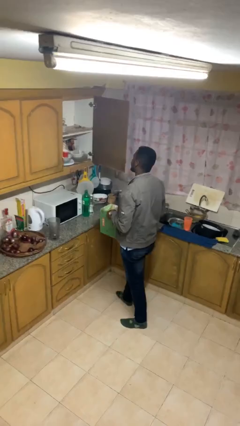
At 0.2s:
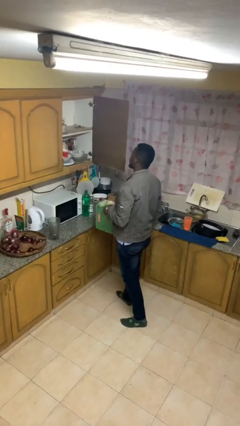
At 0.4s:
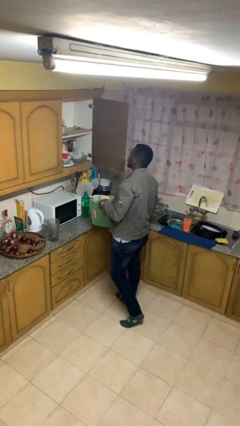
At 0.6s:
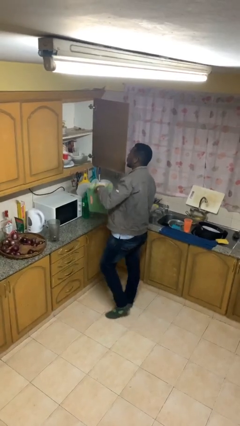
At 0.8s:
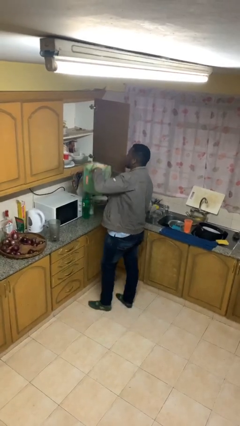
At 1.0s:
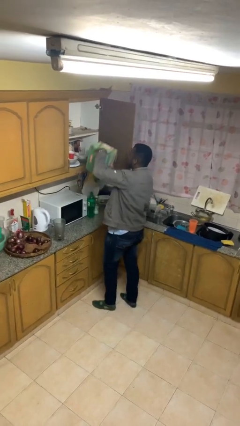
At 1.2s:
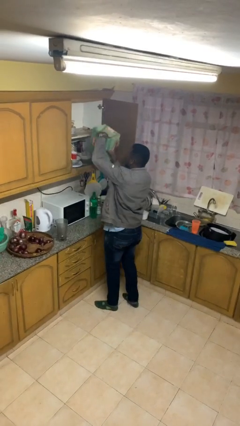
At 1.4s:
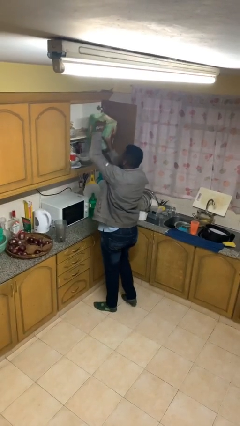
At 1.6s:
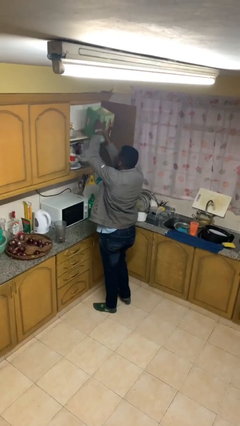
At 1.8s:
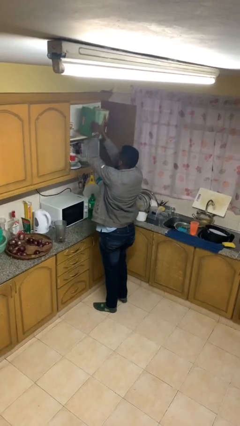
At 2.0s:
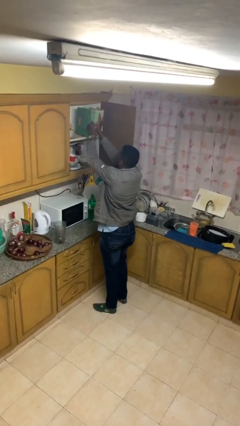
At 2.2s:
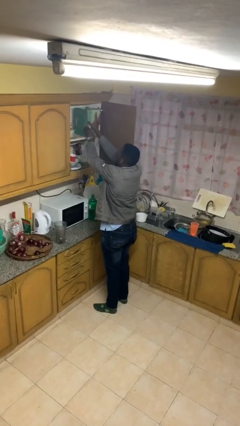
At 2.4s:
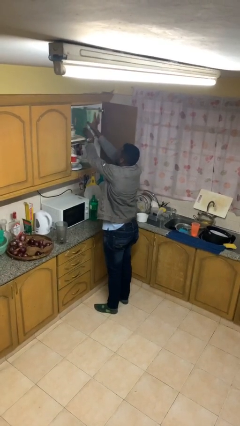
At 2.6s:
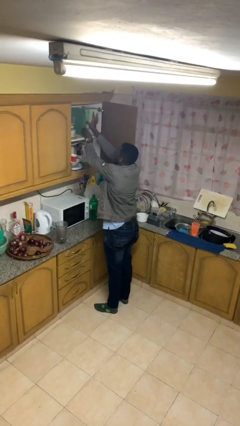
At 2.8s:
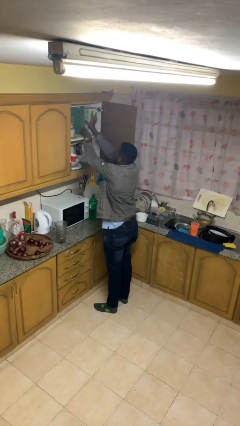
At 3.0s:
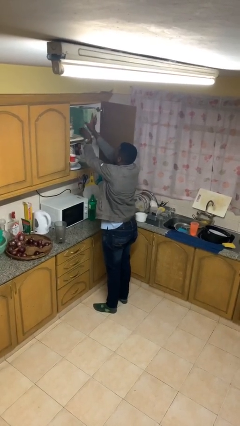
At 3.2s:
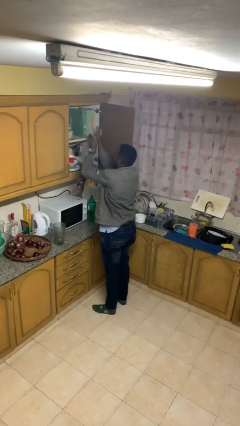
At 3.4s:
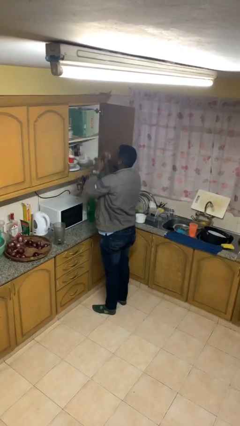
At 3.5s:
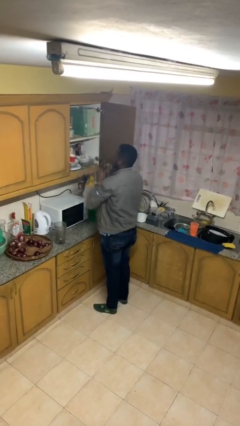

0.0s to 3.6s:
person puts down object on shelf

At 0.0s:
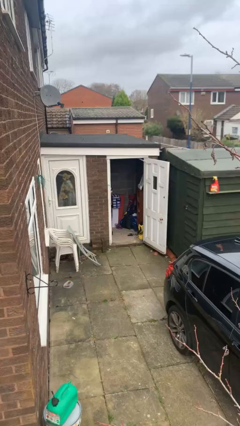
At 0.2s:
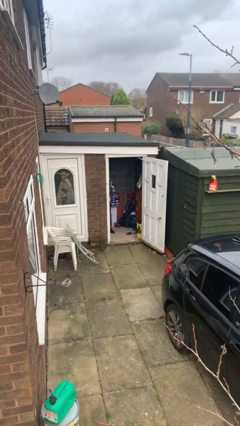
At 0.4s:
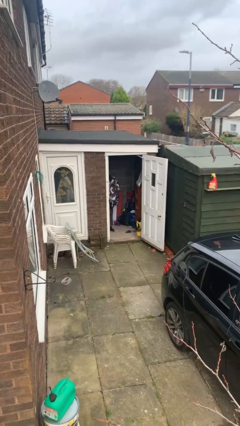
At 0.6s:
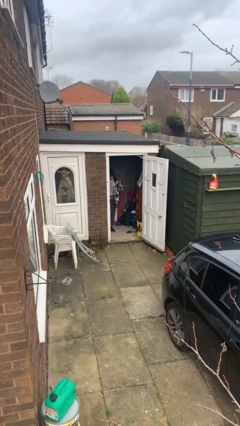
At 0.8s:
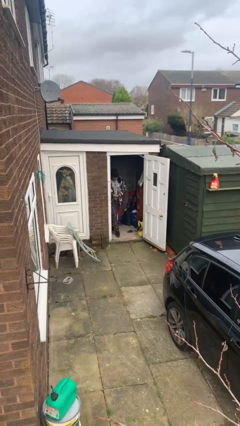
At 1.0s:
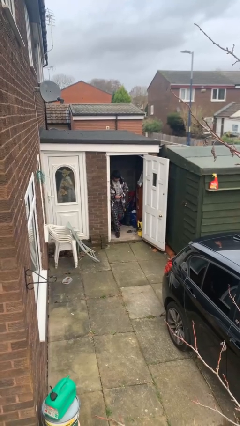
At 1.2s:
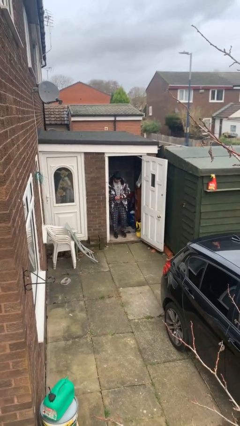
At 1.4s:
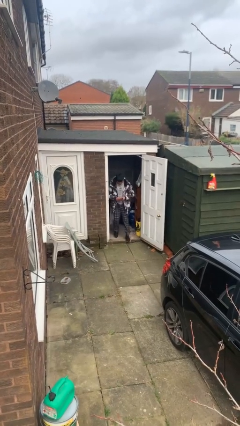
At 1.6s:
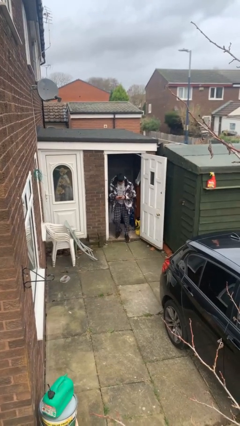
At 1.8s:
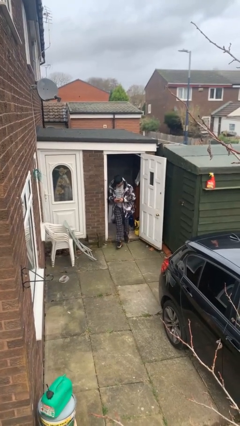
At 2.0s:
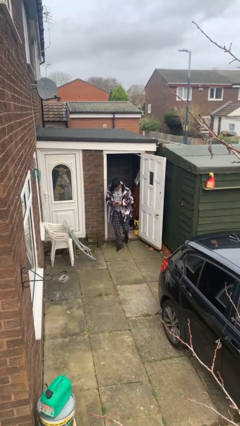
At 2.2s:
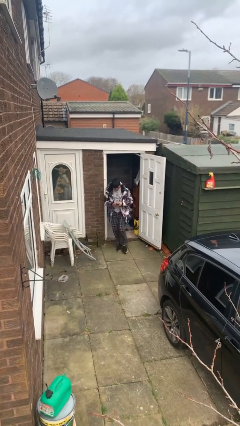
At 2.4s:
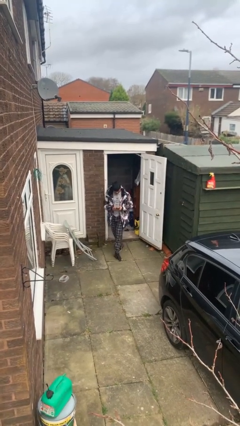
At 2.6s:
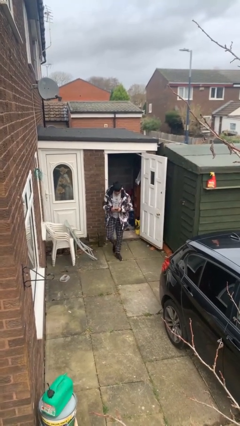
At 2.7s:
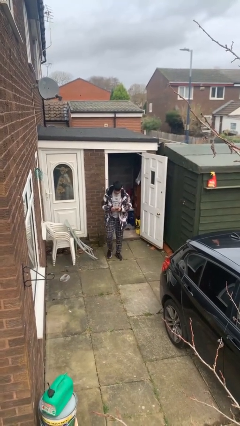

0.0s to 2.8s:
person enters scene through structure

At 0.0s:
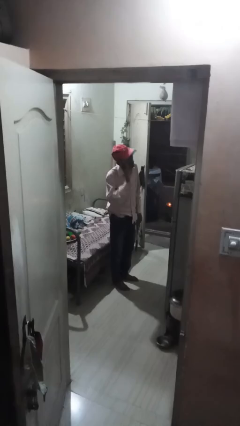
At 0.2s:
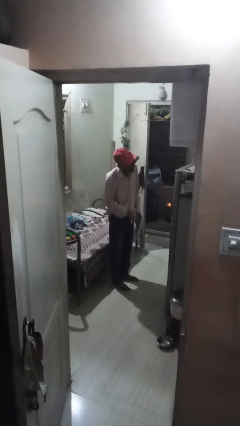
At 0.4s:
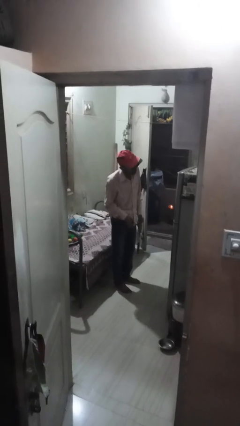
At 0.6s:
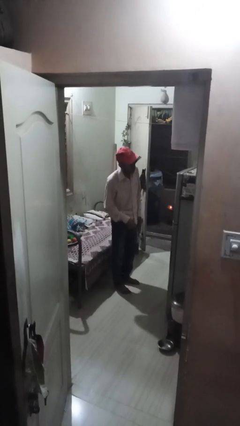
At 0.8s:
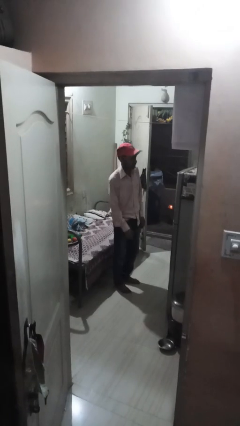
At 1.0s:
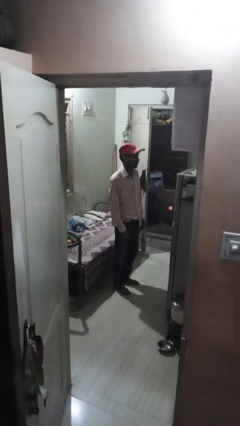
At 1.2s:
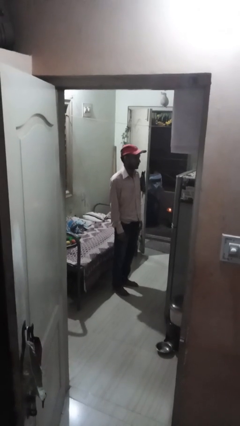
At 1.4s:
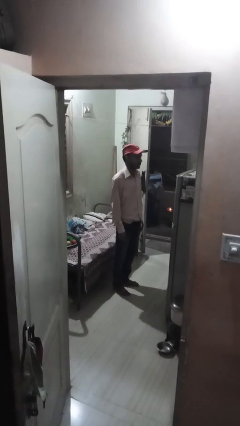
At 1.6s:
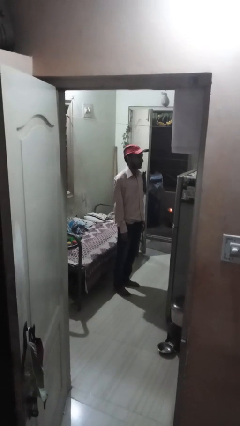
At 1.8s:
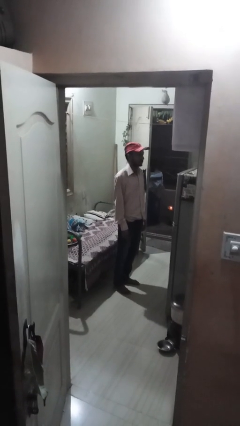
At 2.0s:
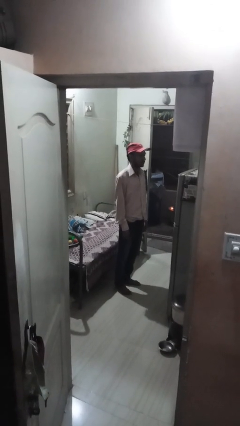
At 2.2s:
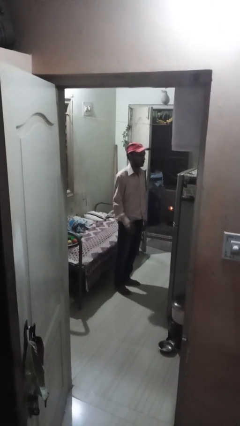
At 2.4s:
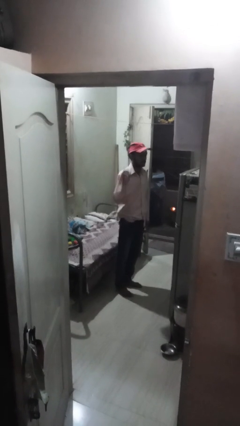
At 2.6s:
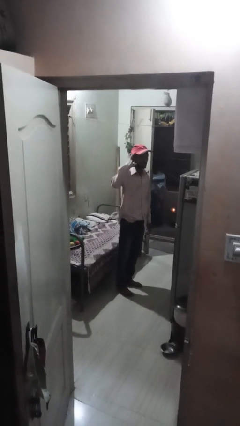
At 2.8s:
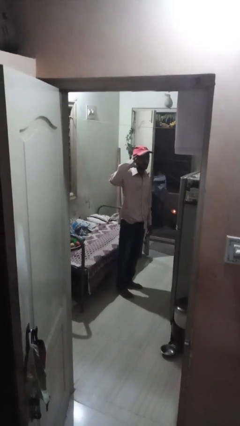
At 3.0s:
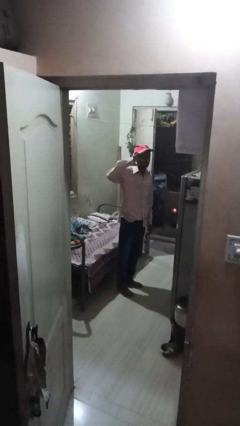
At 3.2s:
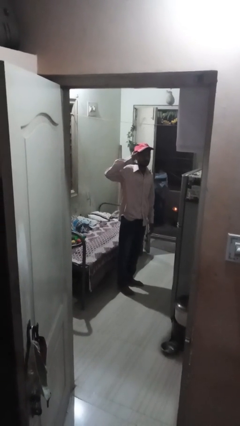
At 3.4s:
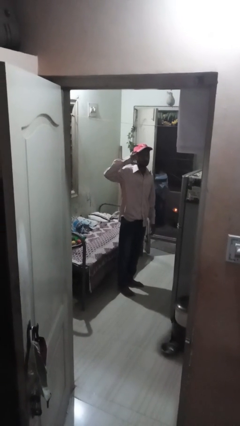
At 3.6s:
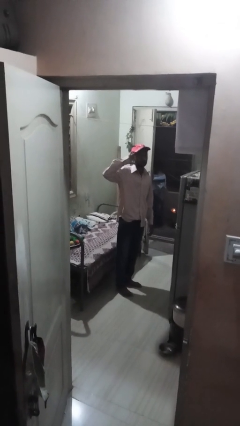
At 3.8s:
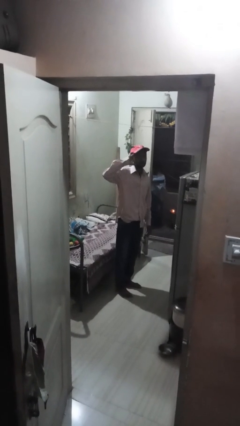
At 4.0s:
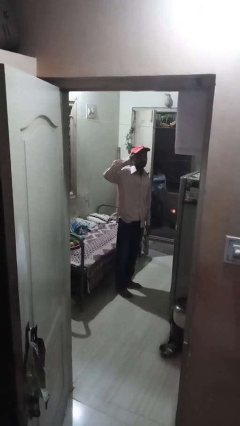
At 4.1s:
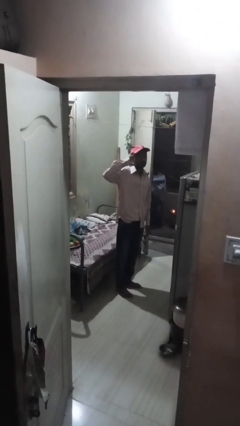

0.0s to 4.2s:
person salutes

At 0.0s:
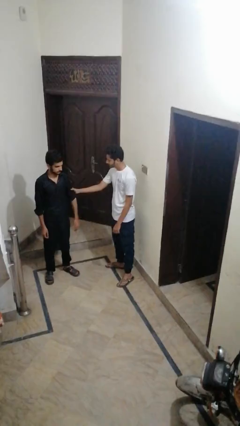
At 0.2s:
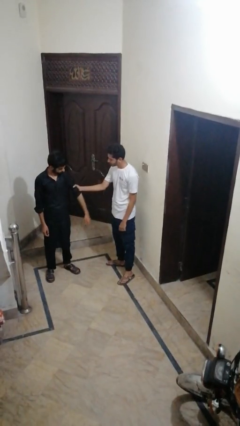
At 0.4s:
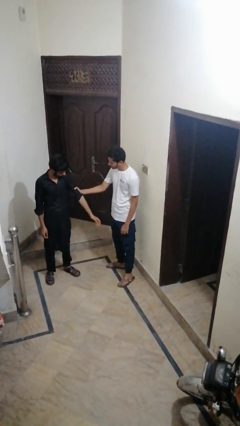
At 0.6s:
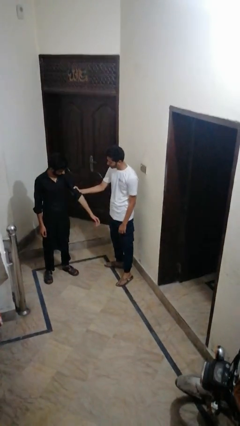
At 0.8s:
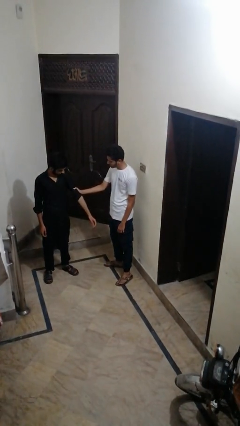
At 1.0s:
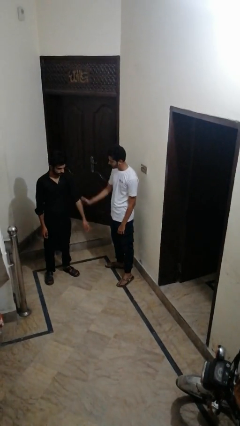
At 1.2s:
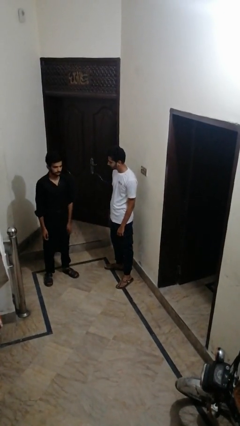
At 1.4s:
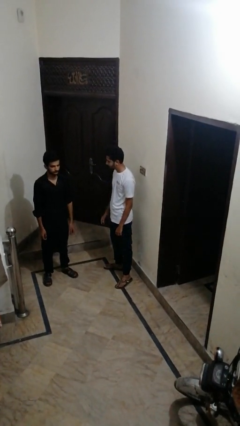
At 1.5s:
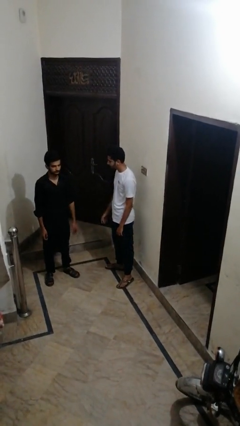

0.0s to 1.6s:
person grabs person by bicep

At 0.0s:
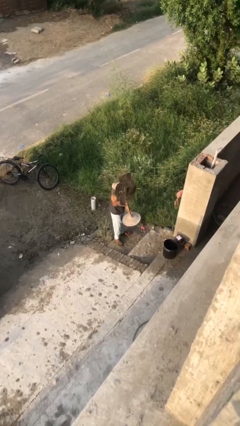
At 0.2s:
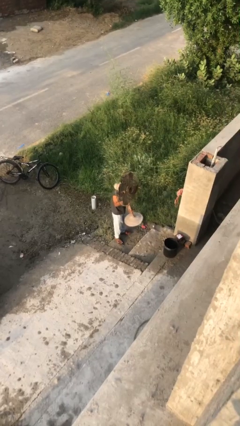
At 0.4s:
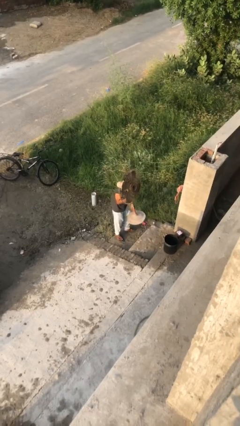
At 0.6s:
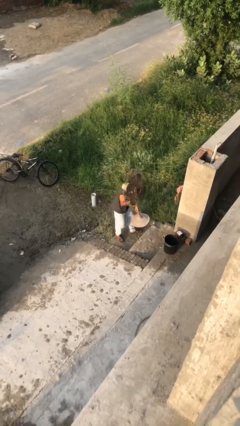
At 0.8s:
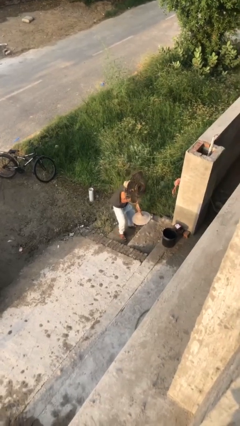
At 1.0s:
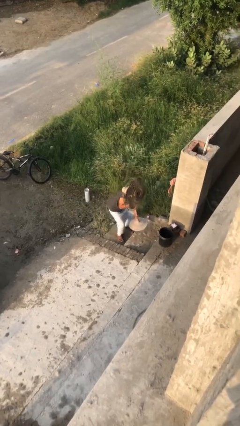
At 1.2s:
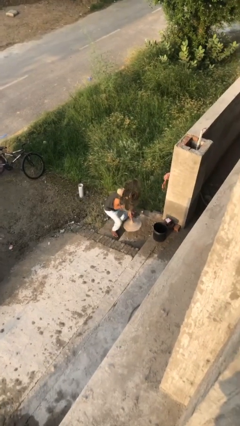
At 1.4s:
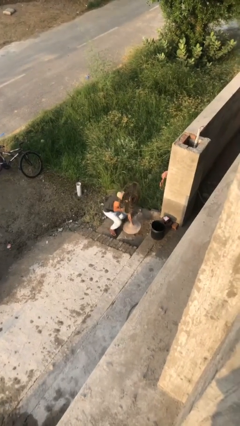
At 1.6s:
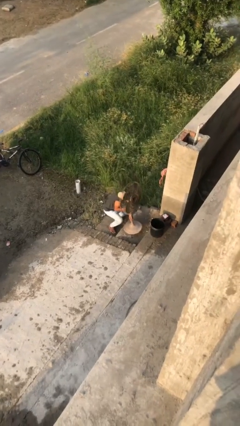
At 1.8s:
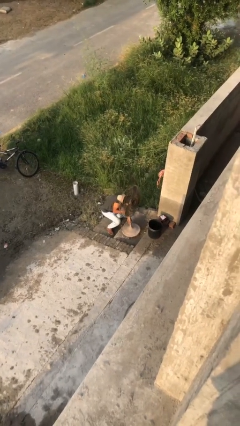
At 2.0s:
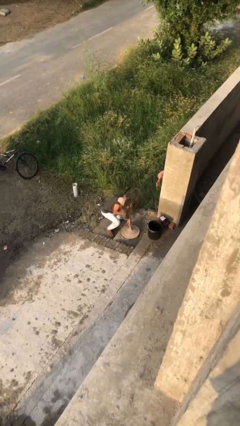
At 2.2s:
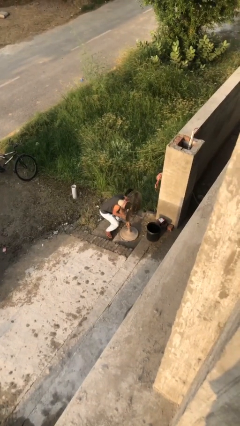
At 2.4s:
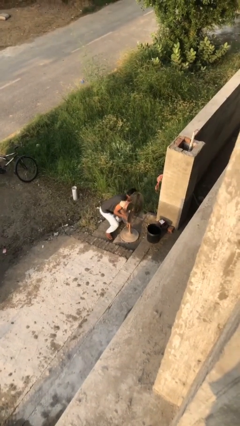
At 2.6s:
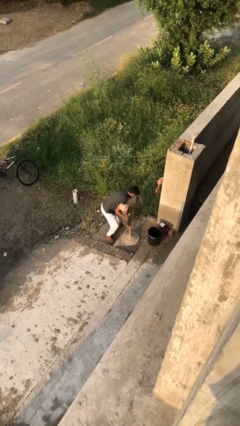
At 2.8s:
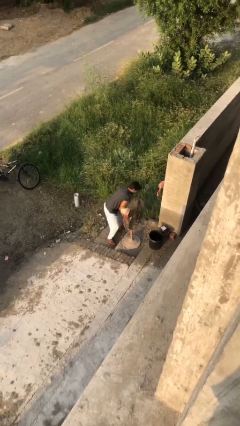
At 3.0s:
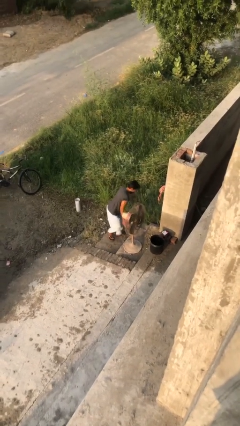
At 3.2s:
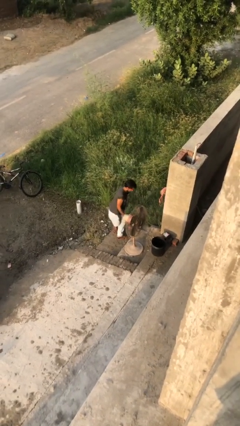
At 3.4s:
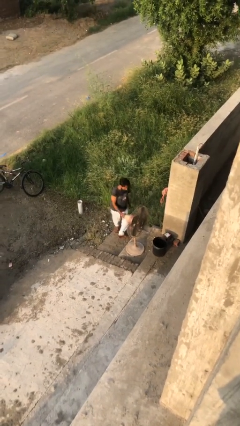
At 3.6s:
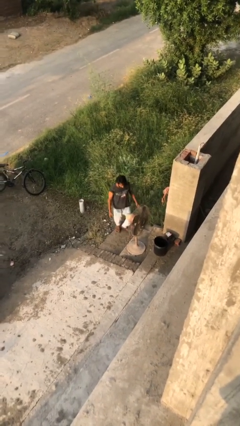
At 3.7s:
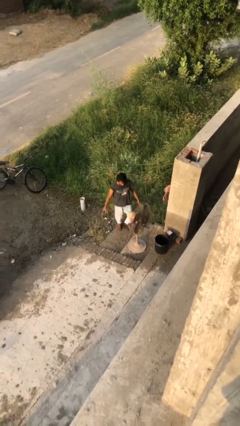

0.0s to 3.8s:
person puts down object on floor

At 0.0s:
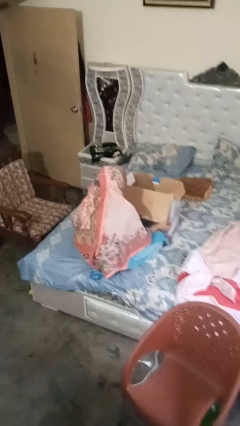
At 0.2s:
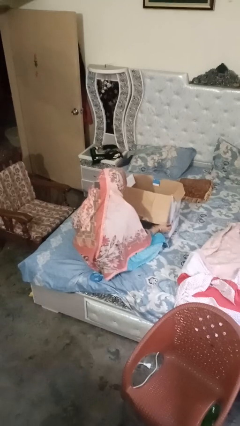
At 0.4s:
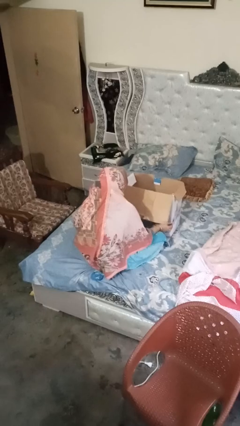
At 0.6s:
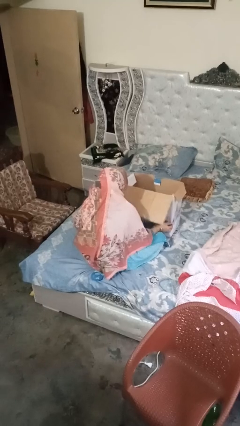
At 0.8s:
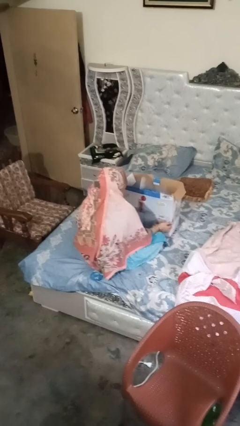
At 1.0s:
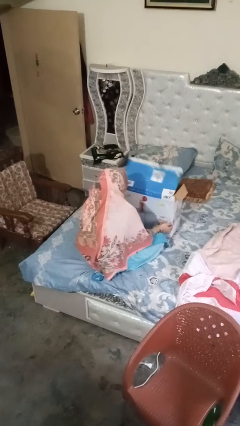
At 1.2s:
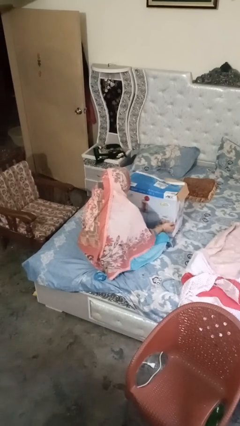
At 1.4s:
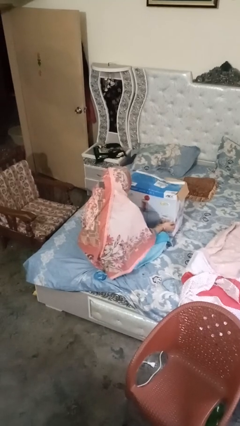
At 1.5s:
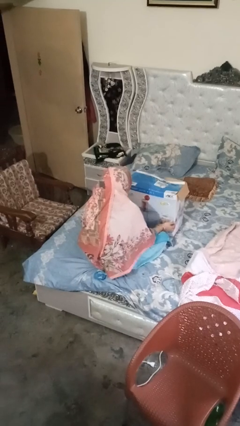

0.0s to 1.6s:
person closes box
